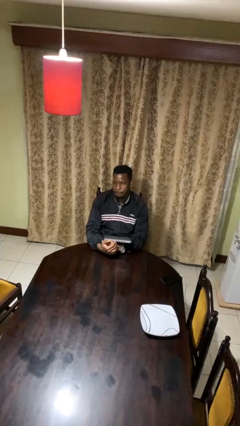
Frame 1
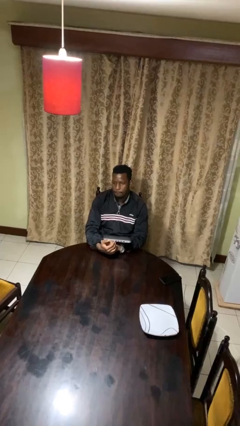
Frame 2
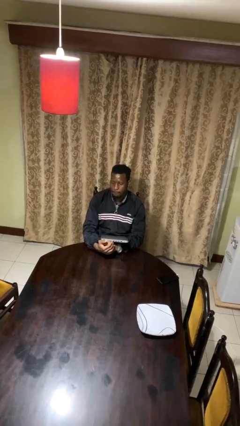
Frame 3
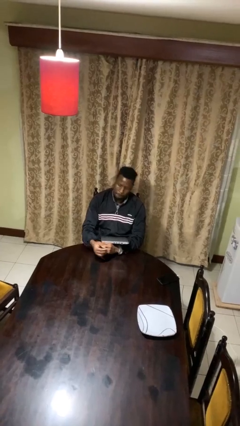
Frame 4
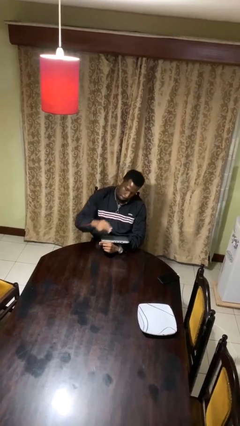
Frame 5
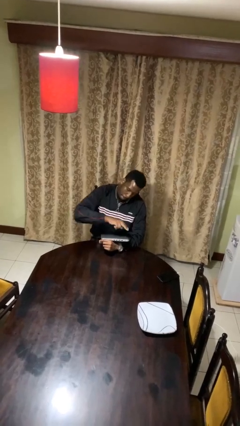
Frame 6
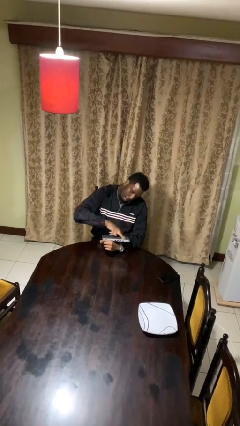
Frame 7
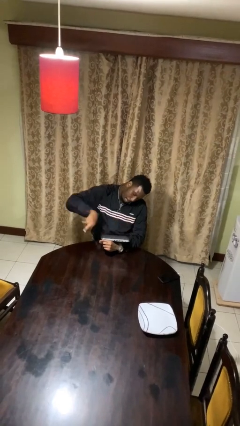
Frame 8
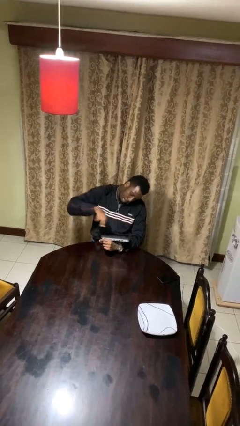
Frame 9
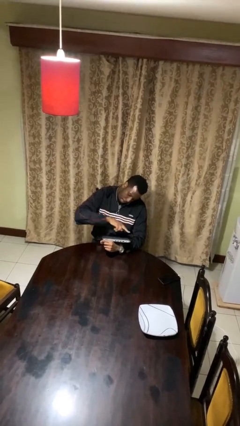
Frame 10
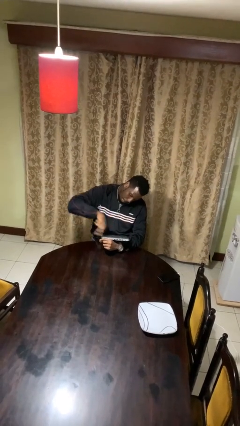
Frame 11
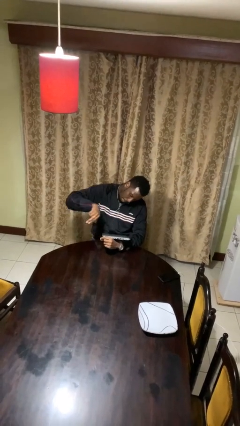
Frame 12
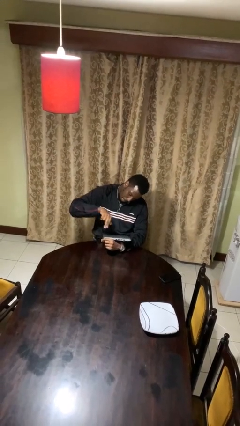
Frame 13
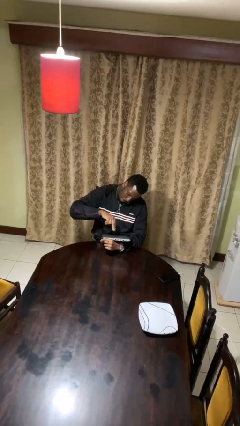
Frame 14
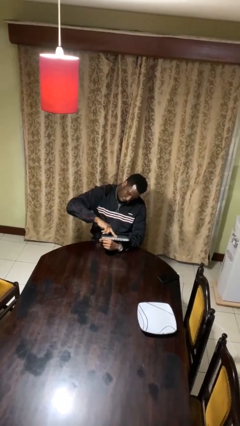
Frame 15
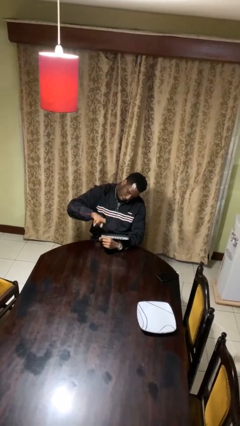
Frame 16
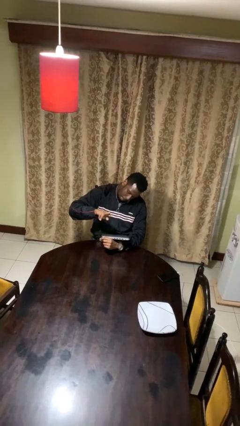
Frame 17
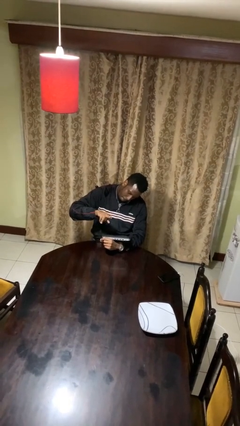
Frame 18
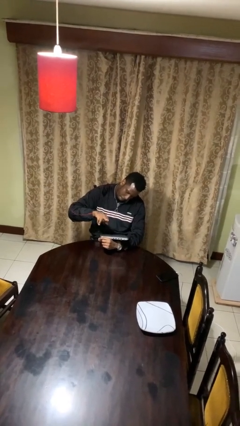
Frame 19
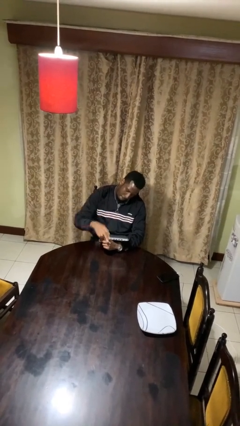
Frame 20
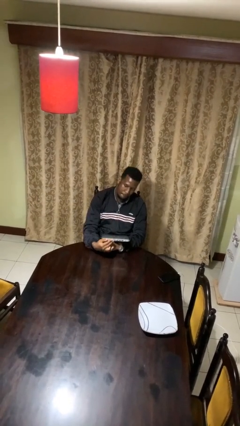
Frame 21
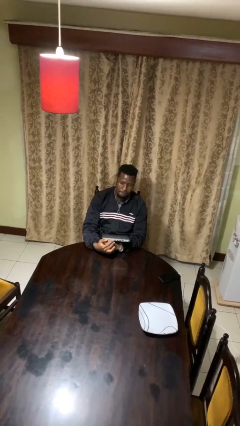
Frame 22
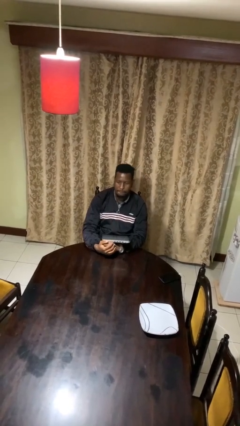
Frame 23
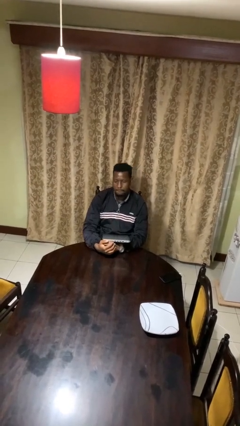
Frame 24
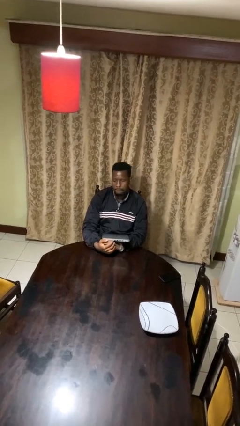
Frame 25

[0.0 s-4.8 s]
person interacts with tablet

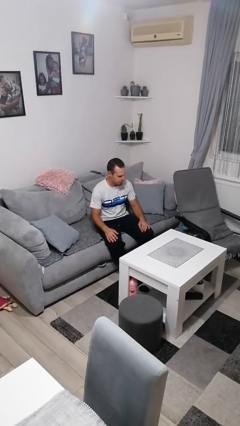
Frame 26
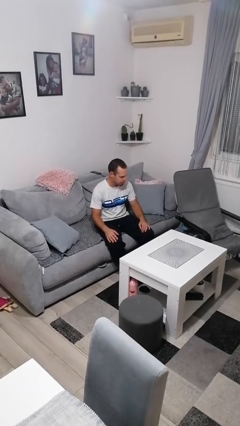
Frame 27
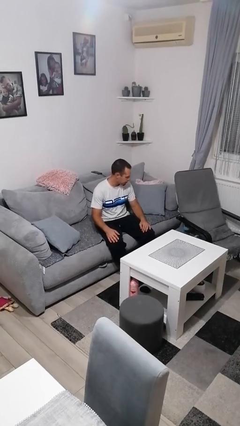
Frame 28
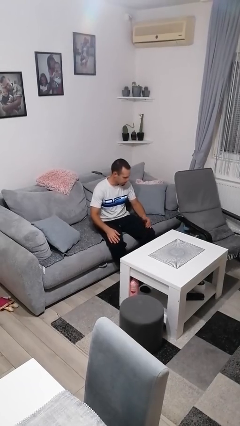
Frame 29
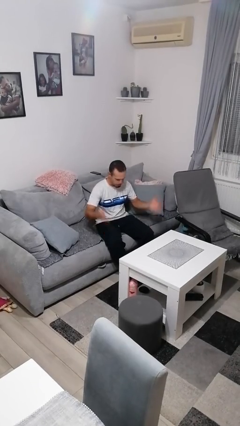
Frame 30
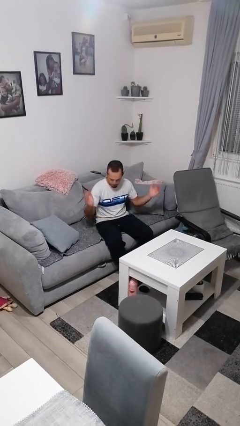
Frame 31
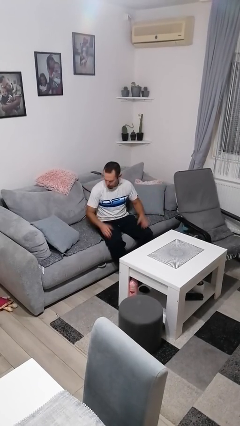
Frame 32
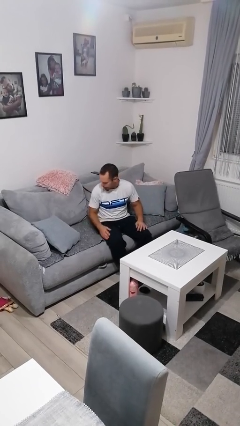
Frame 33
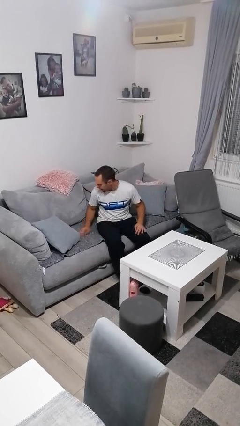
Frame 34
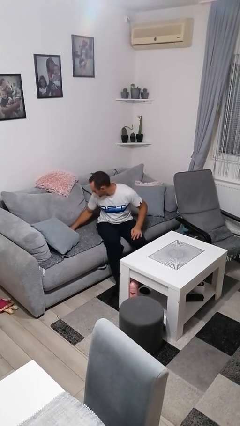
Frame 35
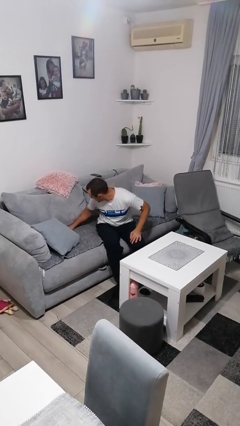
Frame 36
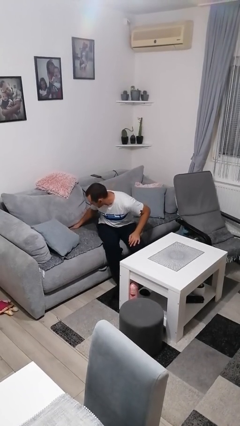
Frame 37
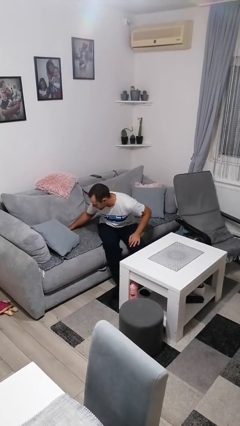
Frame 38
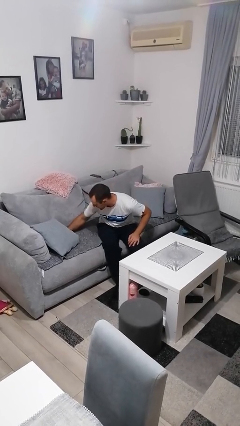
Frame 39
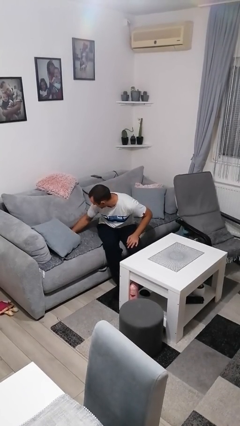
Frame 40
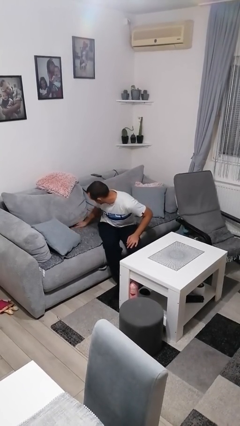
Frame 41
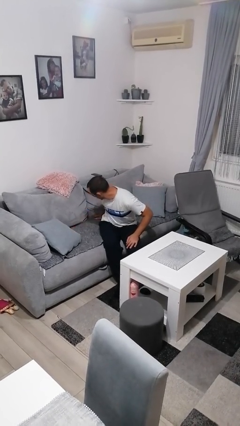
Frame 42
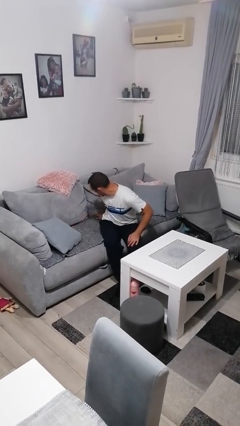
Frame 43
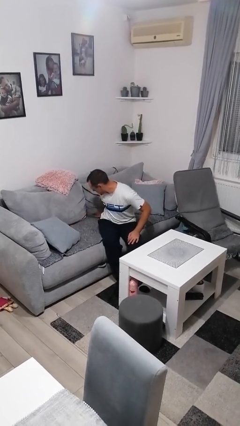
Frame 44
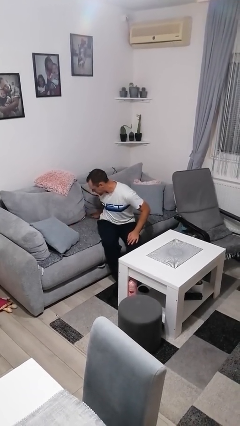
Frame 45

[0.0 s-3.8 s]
person searches in couch

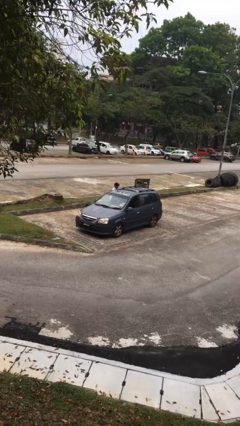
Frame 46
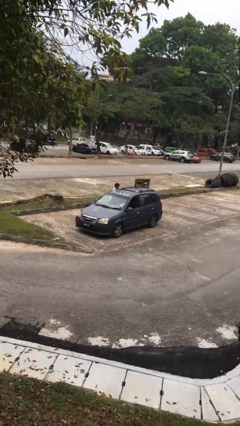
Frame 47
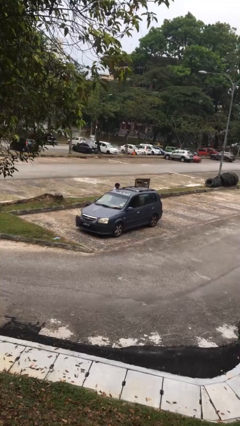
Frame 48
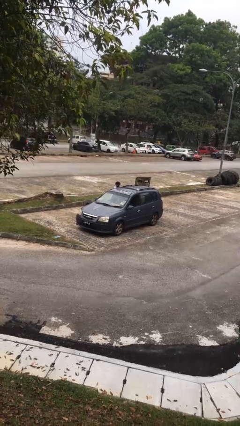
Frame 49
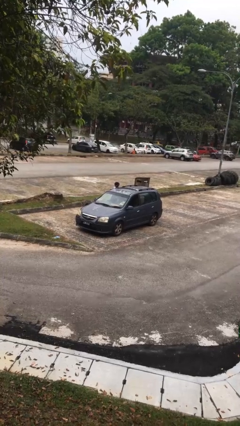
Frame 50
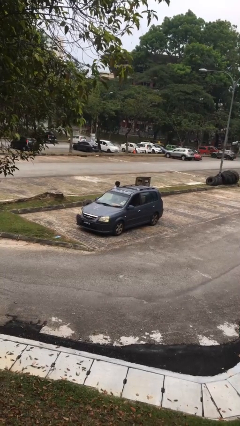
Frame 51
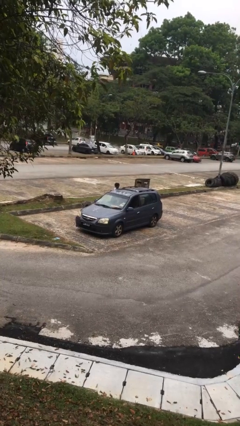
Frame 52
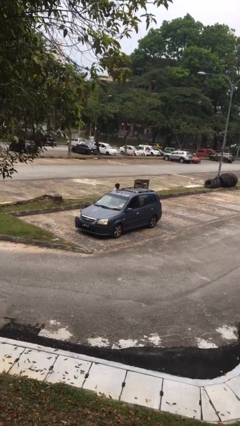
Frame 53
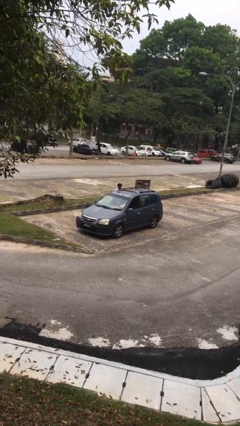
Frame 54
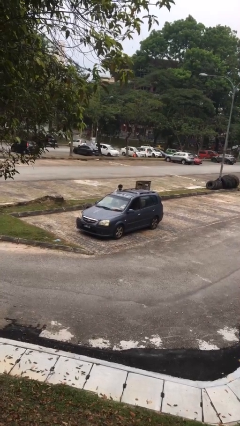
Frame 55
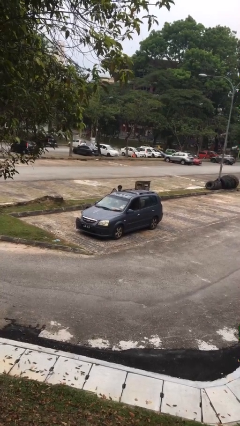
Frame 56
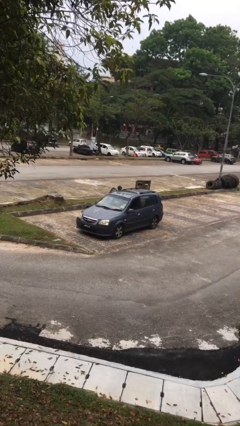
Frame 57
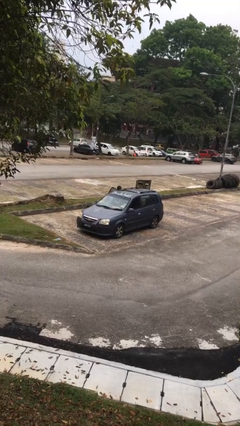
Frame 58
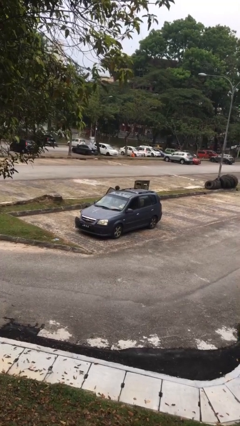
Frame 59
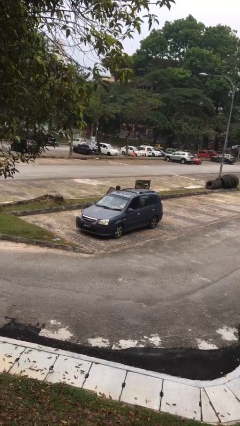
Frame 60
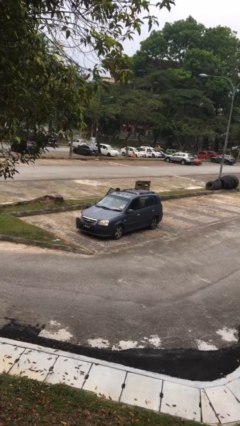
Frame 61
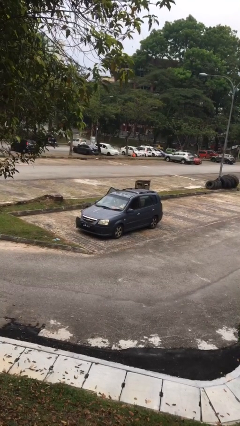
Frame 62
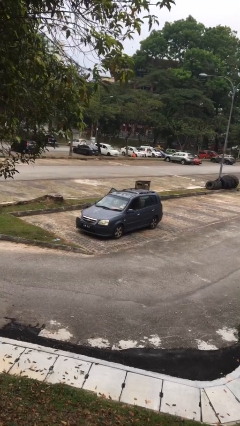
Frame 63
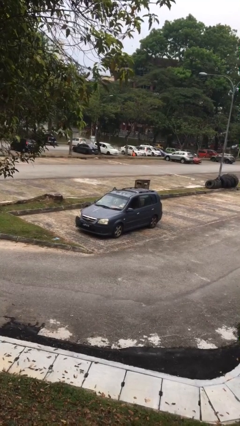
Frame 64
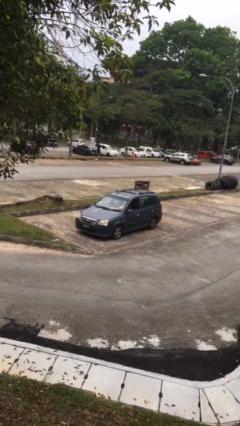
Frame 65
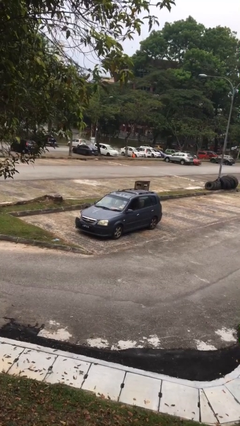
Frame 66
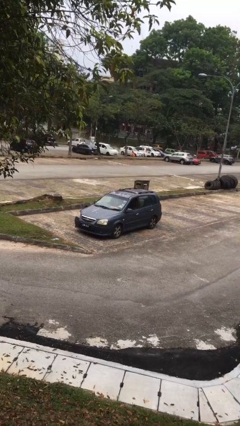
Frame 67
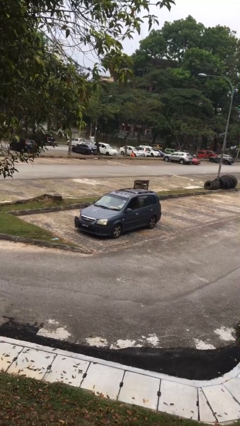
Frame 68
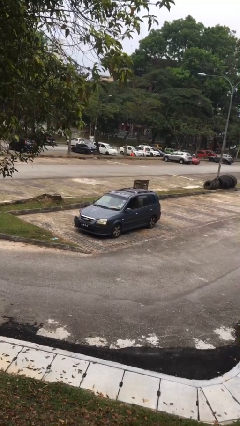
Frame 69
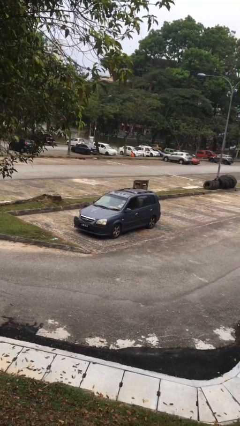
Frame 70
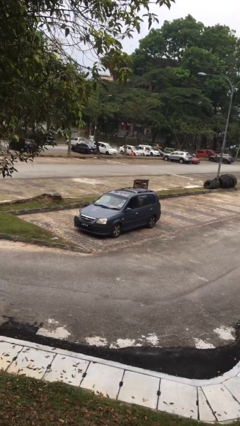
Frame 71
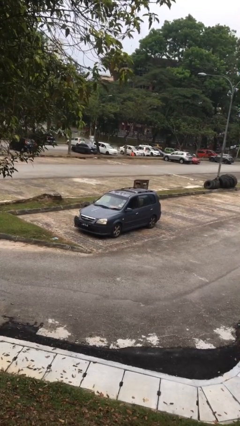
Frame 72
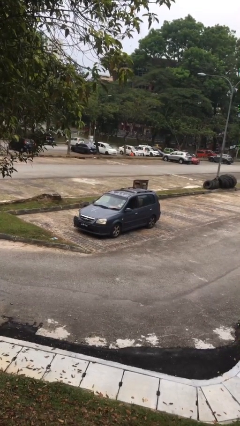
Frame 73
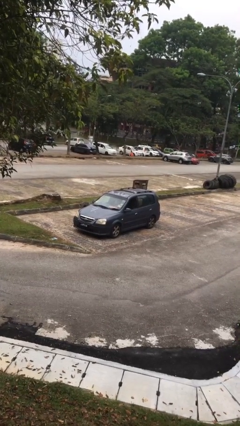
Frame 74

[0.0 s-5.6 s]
car picks up person

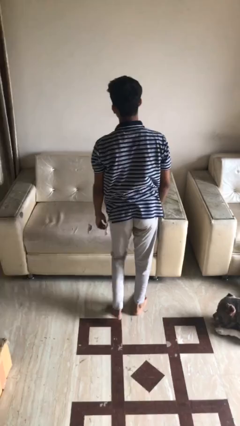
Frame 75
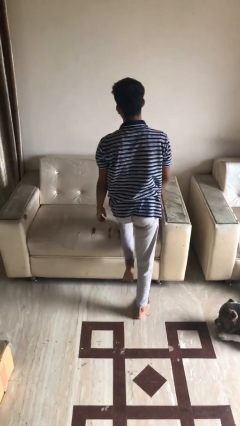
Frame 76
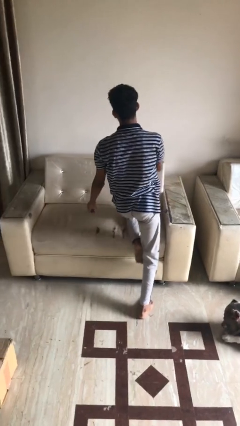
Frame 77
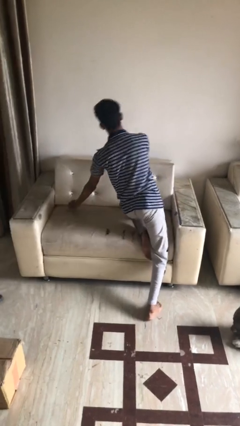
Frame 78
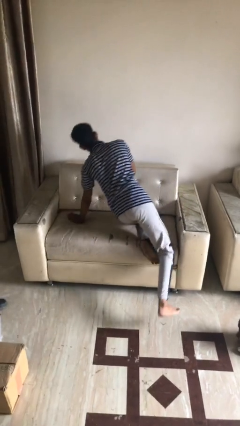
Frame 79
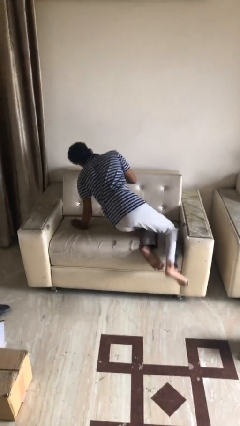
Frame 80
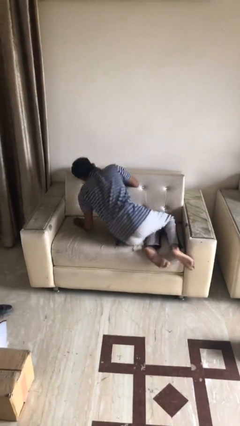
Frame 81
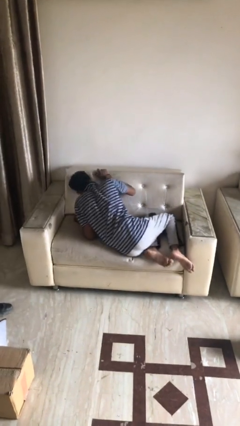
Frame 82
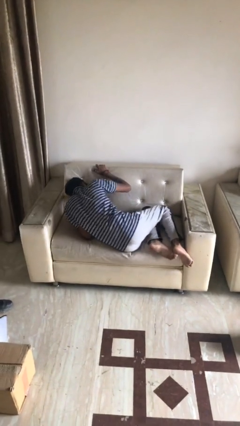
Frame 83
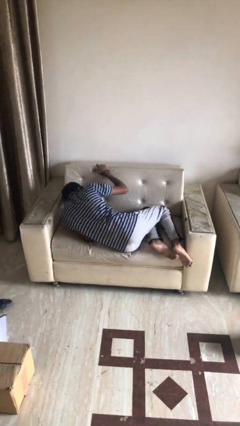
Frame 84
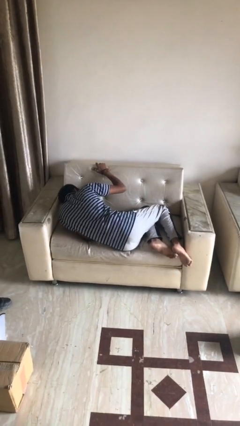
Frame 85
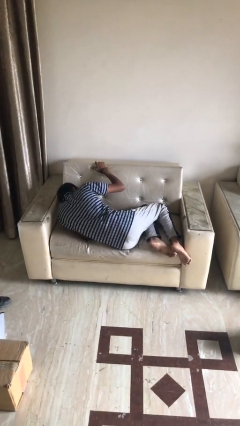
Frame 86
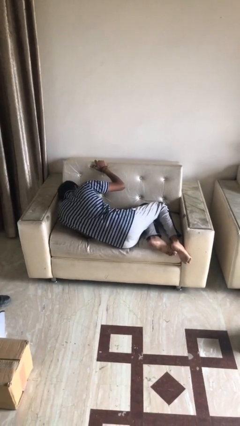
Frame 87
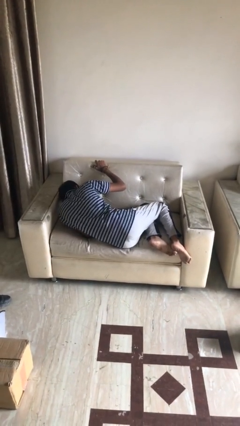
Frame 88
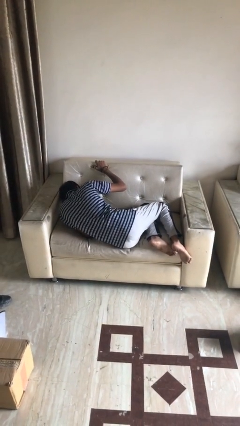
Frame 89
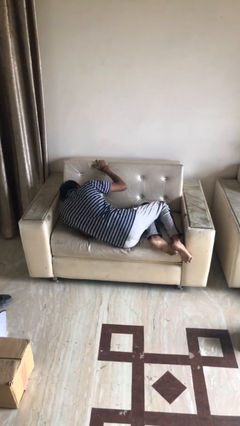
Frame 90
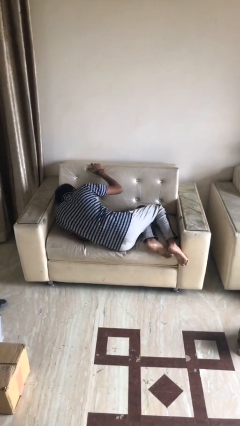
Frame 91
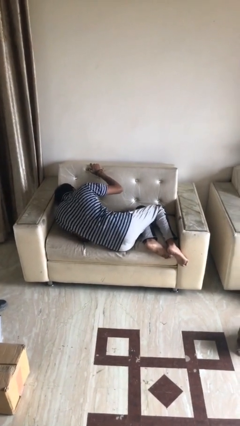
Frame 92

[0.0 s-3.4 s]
person lies down on bed

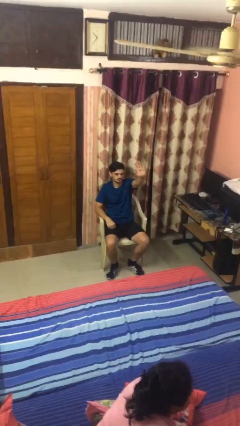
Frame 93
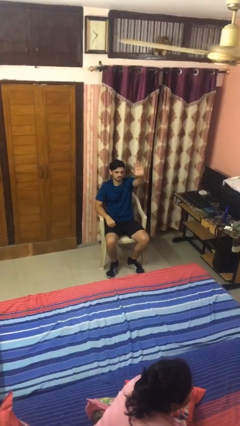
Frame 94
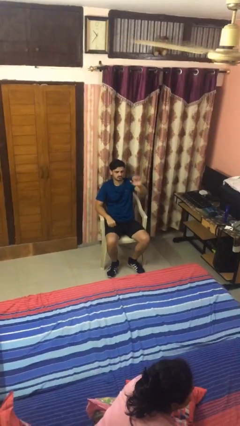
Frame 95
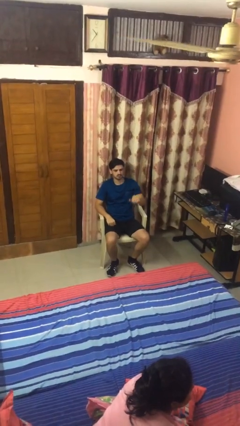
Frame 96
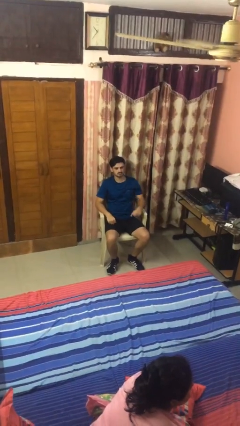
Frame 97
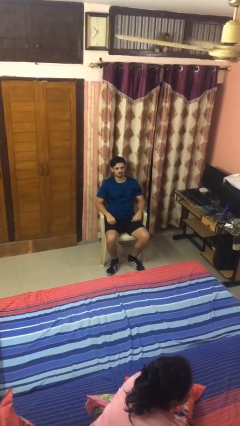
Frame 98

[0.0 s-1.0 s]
person gestures lower hand
